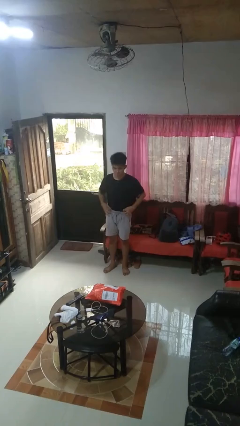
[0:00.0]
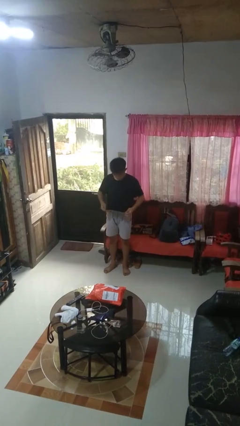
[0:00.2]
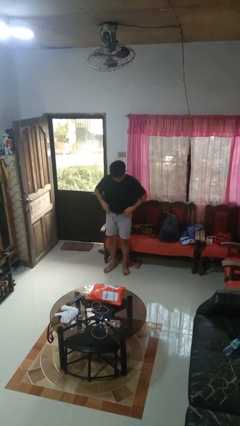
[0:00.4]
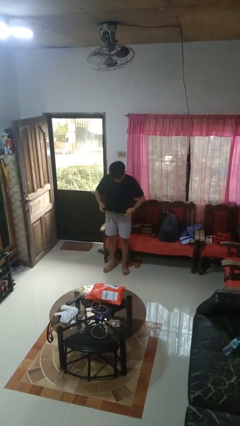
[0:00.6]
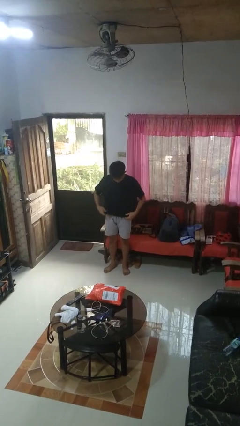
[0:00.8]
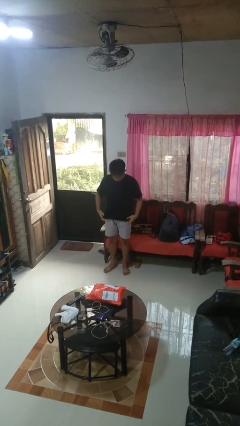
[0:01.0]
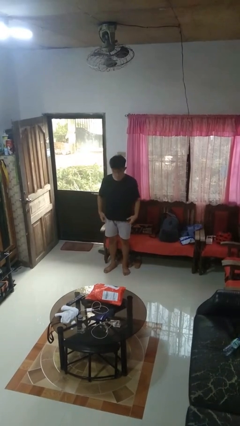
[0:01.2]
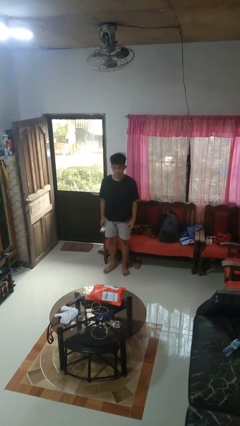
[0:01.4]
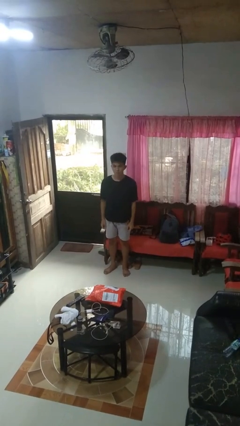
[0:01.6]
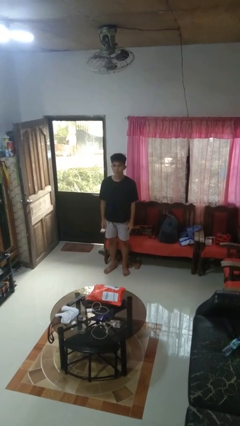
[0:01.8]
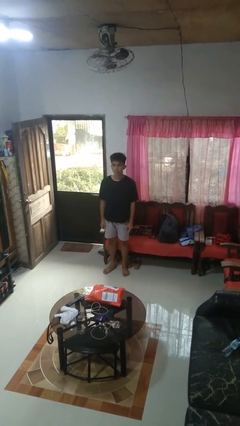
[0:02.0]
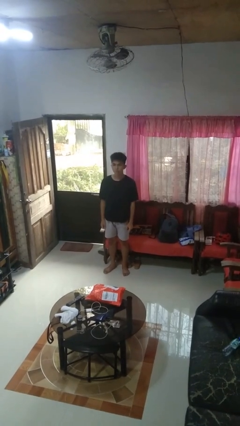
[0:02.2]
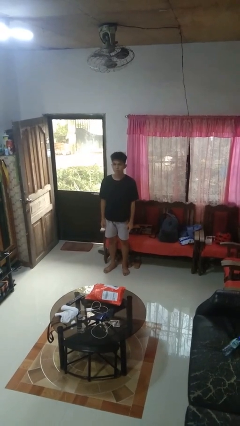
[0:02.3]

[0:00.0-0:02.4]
person untucks shirt

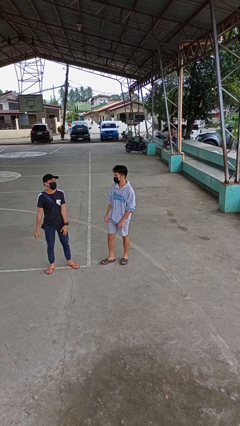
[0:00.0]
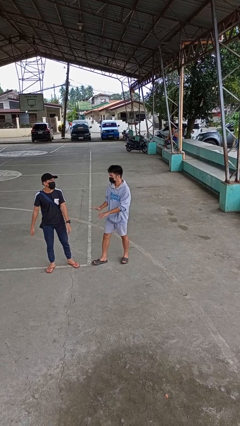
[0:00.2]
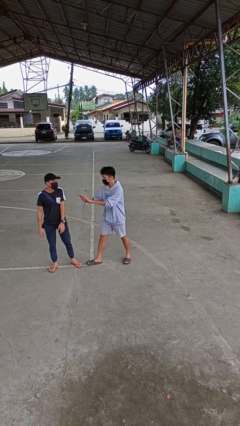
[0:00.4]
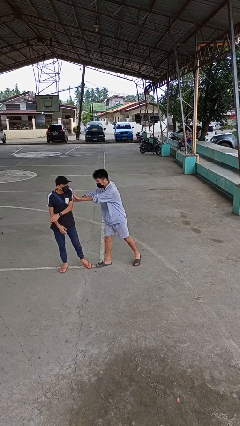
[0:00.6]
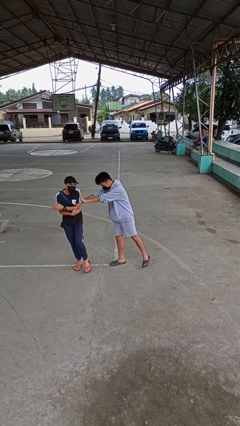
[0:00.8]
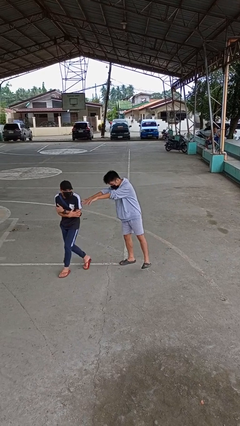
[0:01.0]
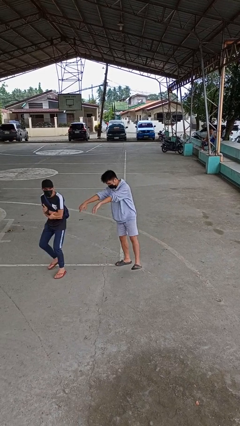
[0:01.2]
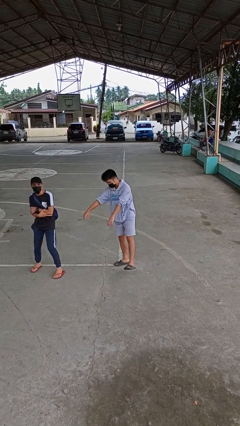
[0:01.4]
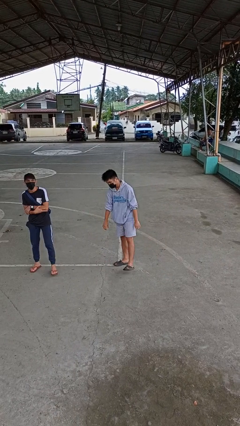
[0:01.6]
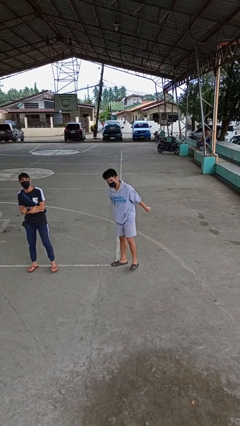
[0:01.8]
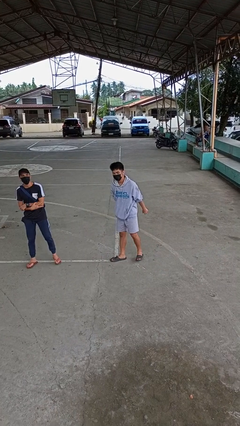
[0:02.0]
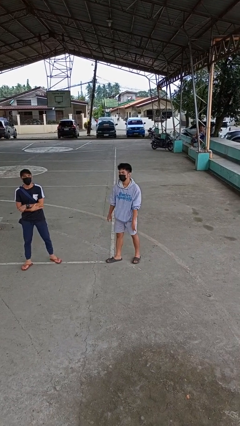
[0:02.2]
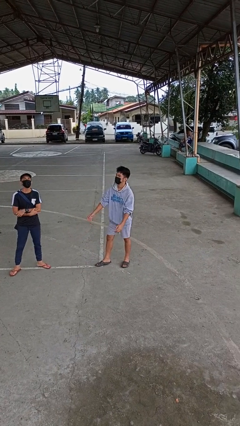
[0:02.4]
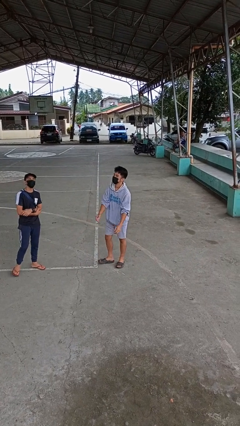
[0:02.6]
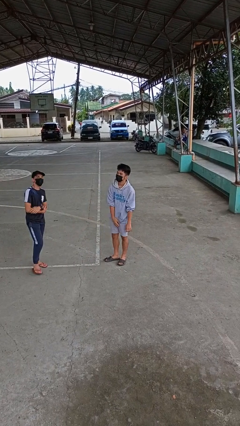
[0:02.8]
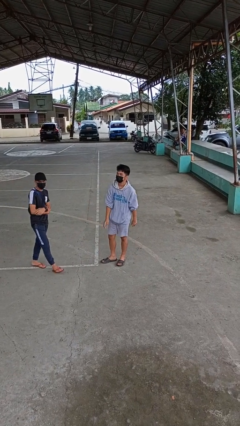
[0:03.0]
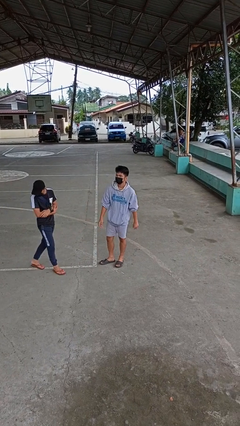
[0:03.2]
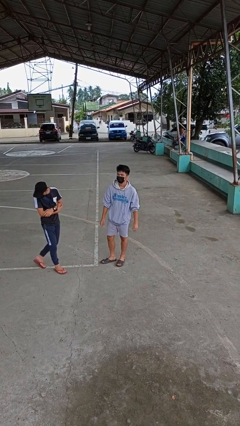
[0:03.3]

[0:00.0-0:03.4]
person shoves person

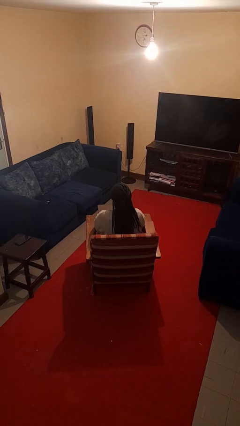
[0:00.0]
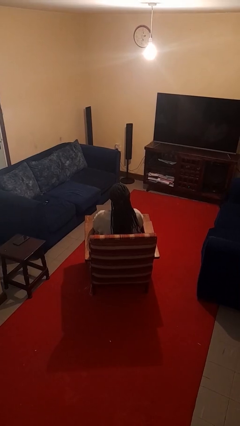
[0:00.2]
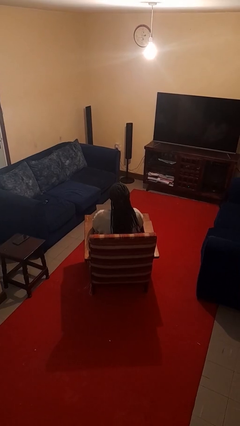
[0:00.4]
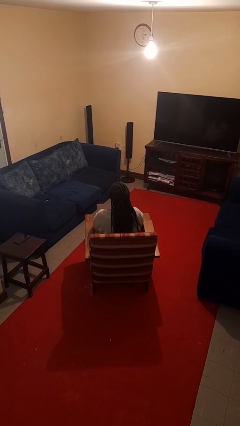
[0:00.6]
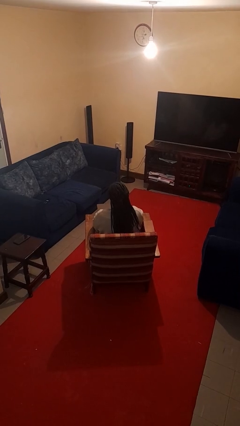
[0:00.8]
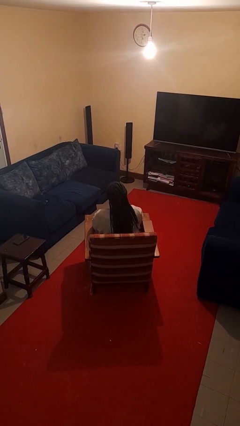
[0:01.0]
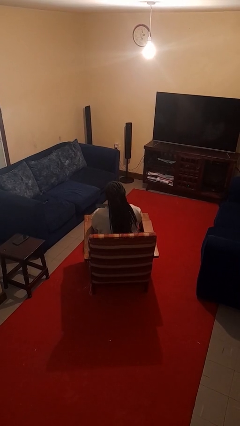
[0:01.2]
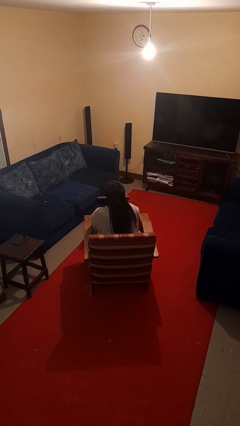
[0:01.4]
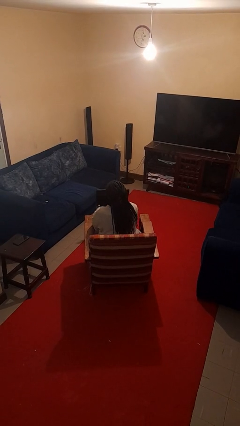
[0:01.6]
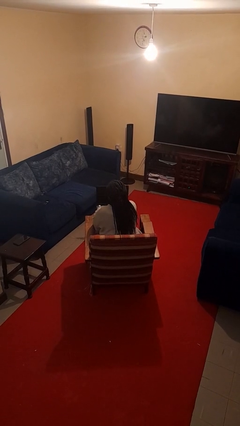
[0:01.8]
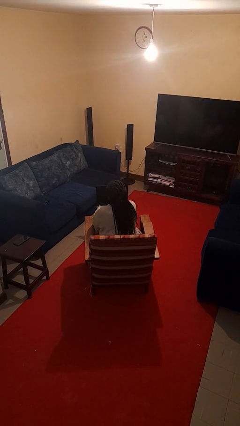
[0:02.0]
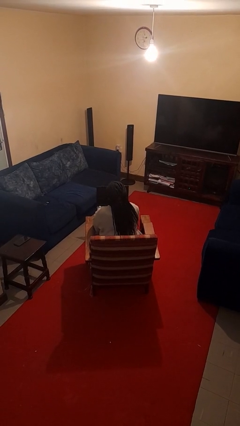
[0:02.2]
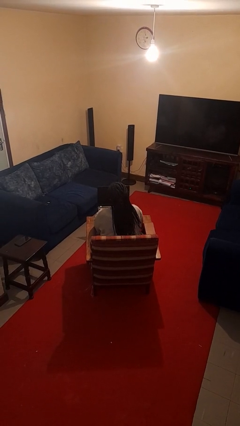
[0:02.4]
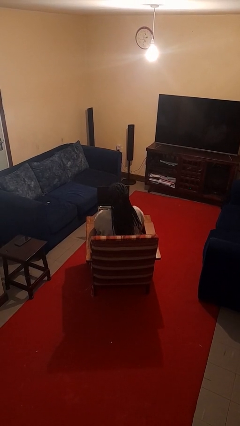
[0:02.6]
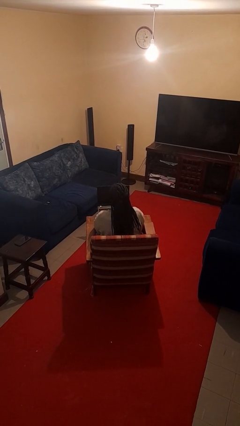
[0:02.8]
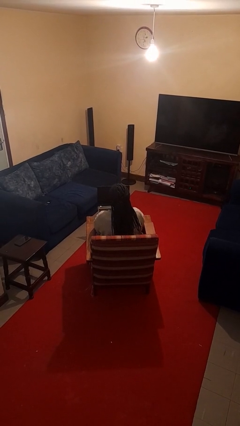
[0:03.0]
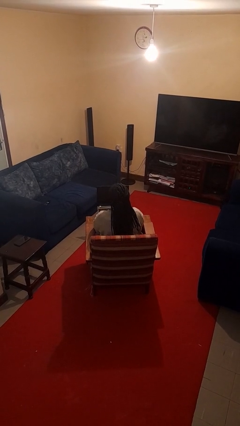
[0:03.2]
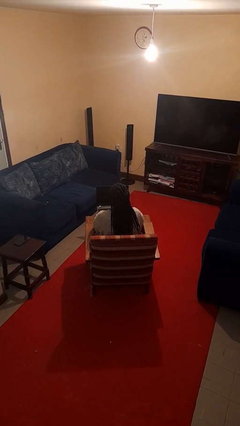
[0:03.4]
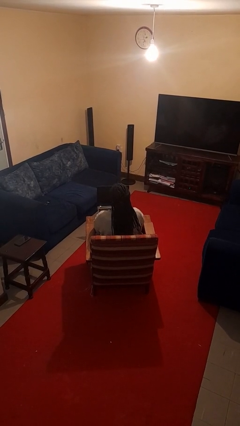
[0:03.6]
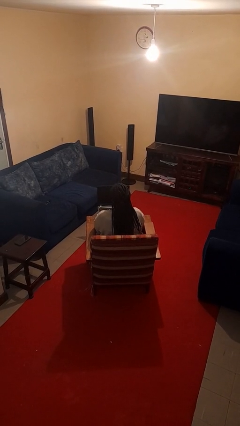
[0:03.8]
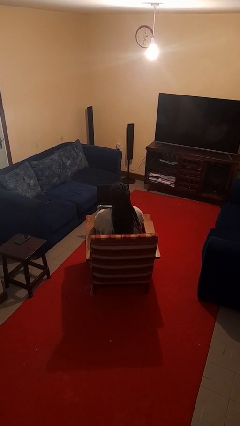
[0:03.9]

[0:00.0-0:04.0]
person opens laptop

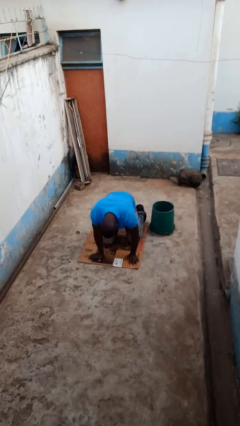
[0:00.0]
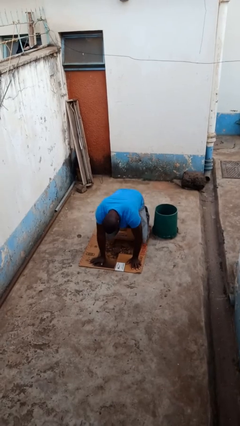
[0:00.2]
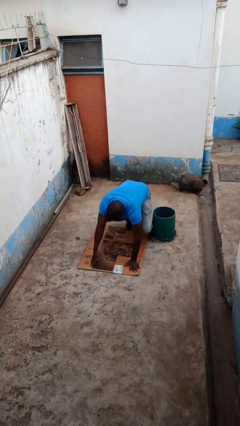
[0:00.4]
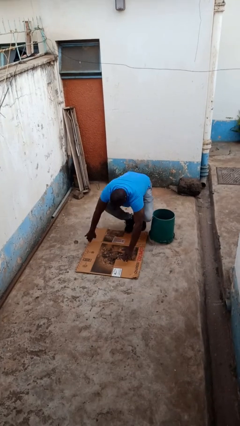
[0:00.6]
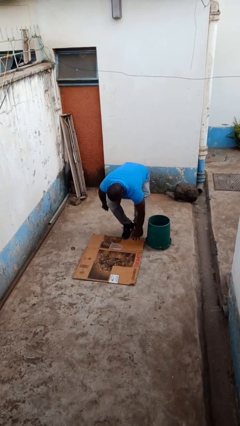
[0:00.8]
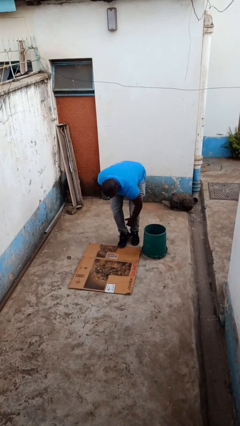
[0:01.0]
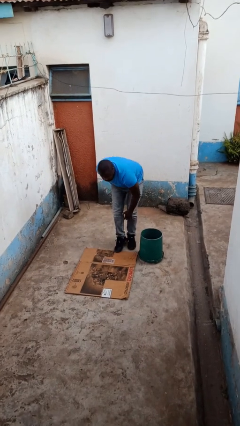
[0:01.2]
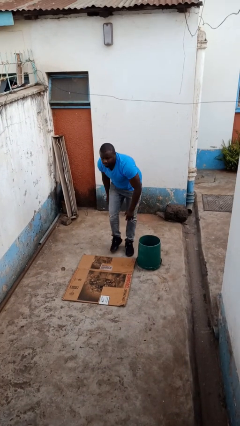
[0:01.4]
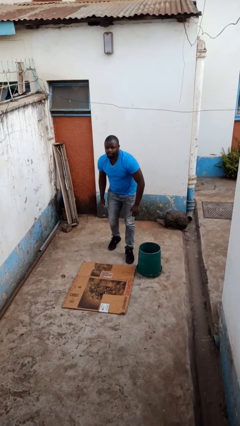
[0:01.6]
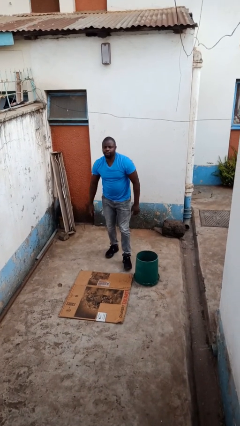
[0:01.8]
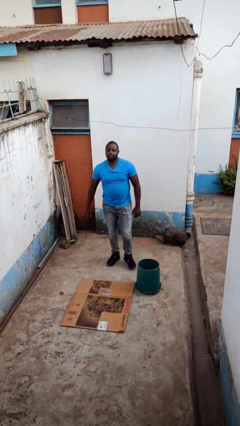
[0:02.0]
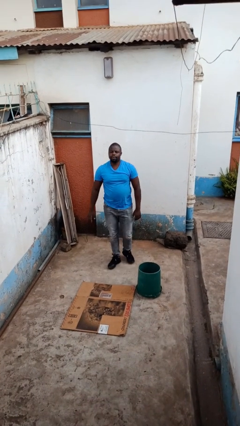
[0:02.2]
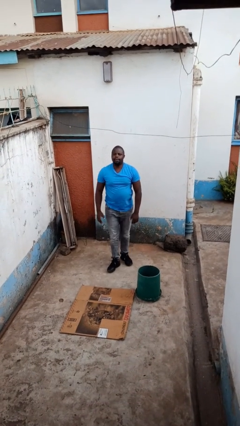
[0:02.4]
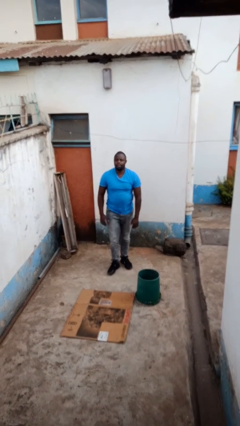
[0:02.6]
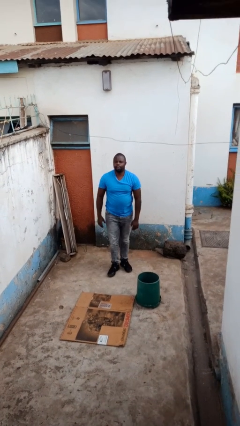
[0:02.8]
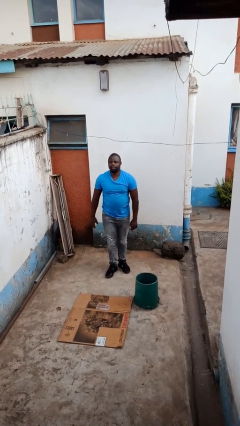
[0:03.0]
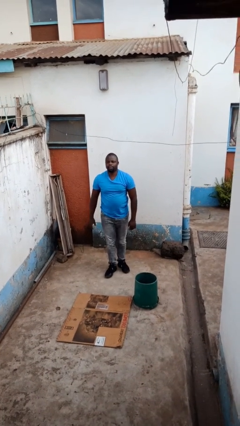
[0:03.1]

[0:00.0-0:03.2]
person stands up from floor

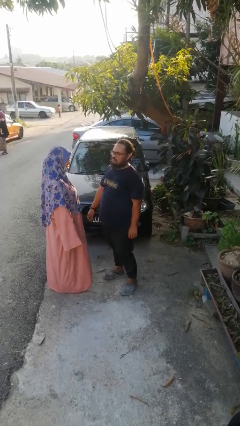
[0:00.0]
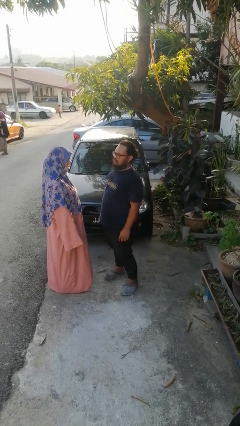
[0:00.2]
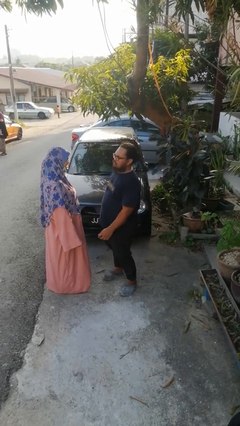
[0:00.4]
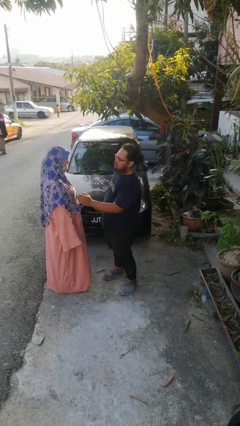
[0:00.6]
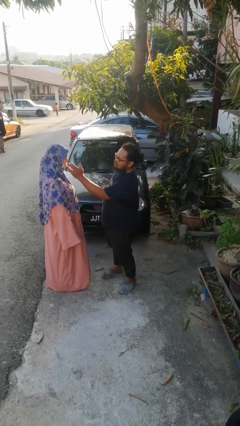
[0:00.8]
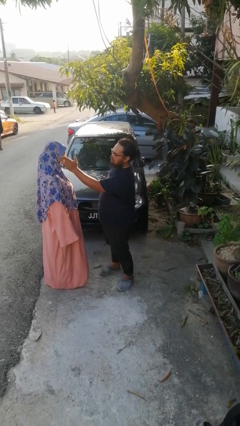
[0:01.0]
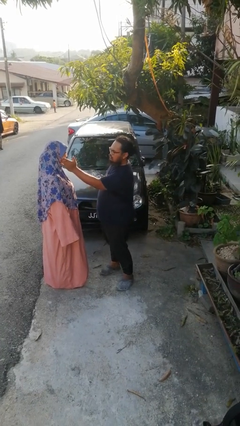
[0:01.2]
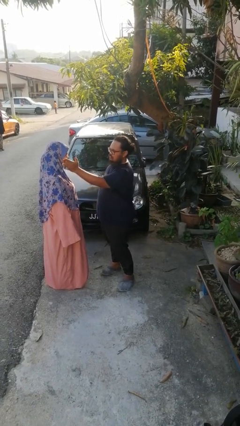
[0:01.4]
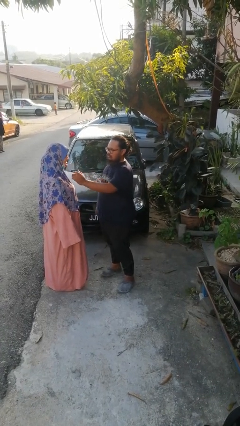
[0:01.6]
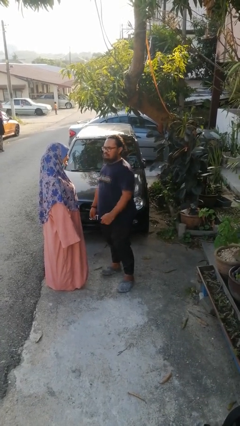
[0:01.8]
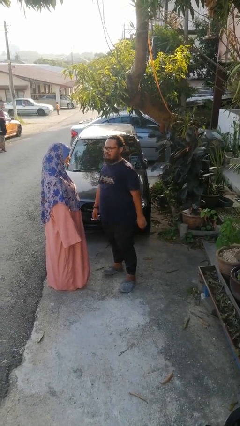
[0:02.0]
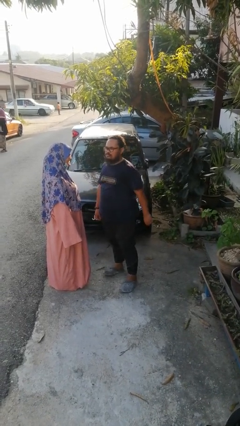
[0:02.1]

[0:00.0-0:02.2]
person touches face of person

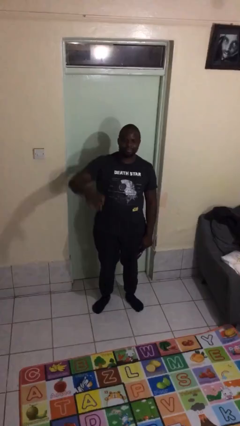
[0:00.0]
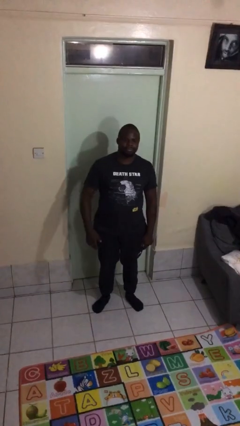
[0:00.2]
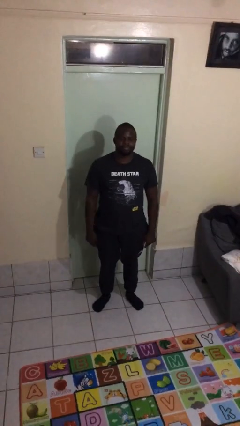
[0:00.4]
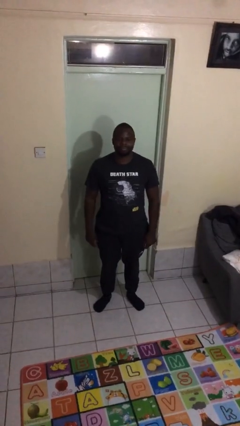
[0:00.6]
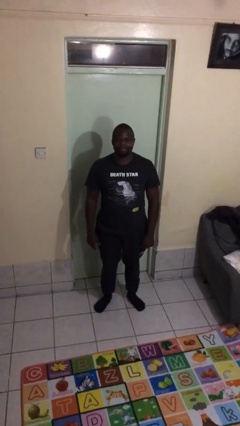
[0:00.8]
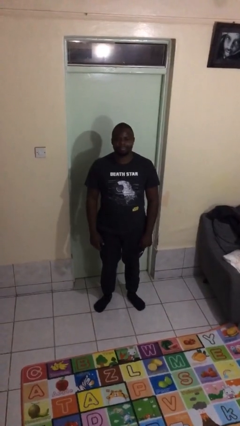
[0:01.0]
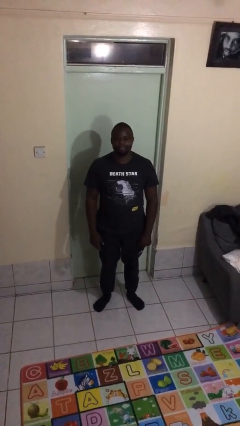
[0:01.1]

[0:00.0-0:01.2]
person gestures lower hand

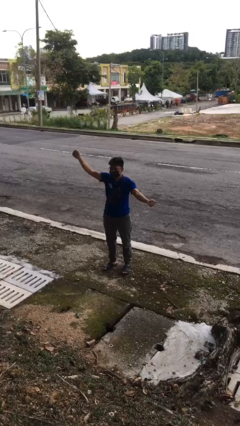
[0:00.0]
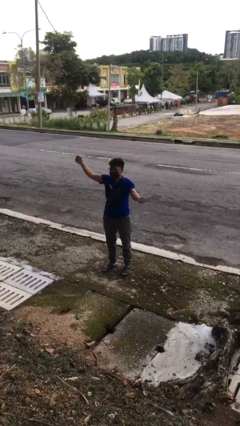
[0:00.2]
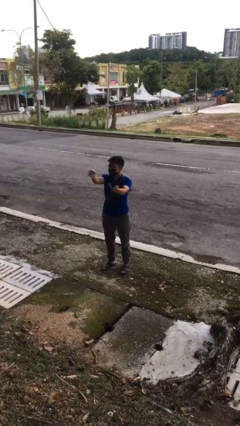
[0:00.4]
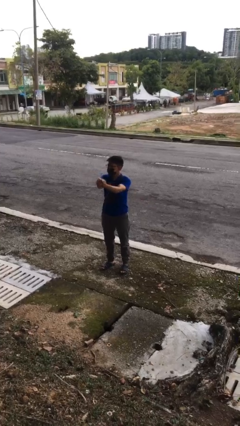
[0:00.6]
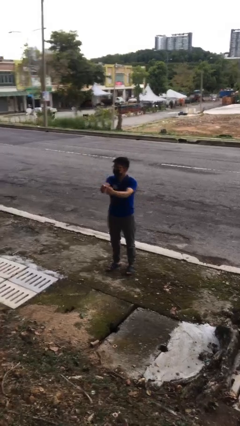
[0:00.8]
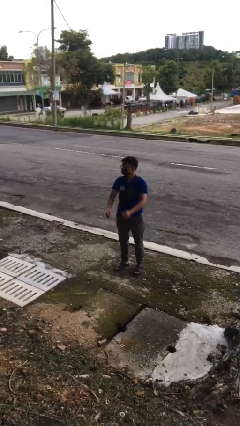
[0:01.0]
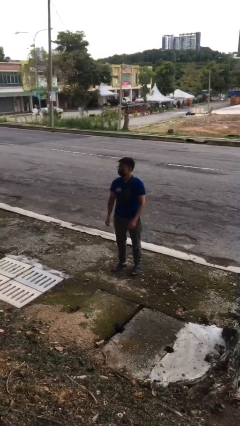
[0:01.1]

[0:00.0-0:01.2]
person gestures zoom out
